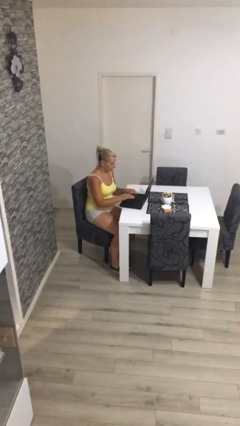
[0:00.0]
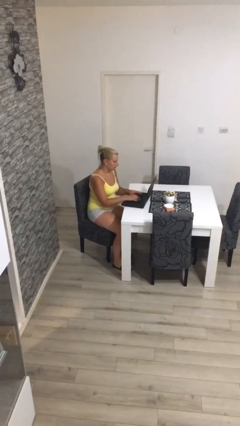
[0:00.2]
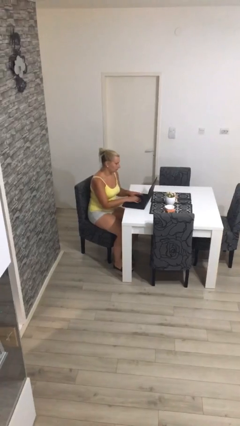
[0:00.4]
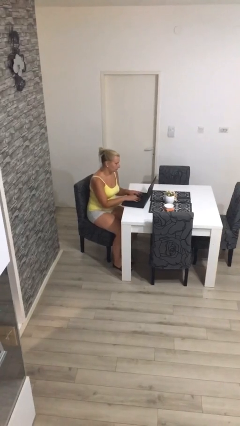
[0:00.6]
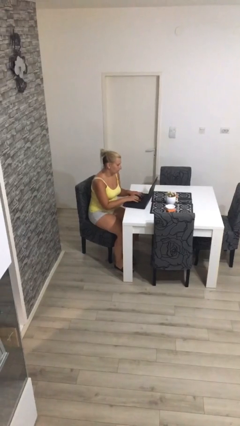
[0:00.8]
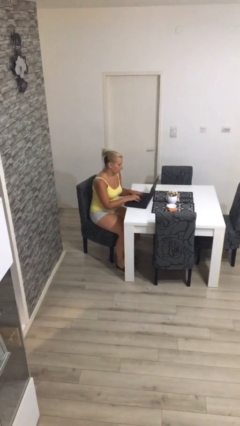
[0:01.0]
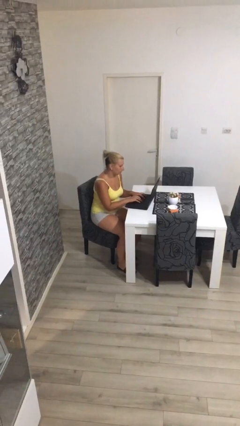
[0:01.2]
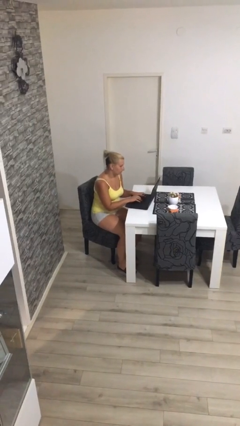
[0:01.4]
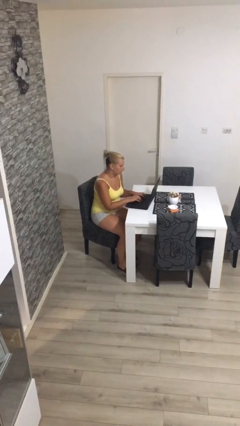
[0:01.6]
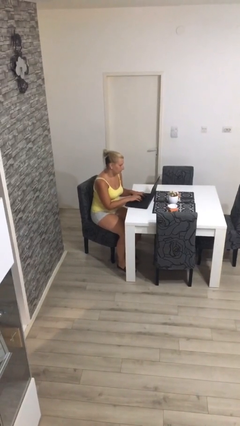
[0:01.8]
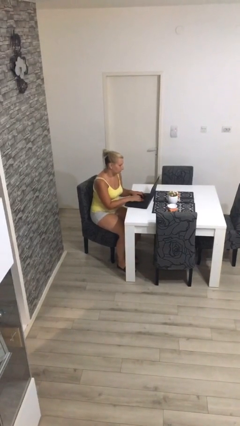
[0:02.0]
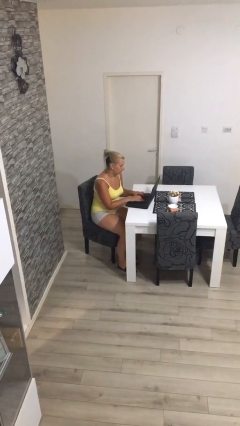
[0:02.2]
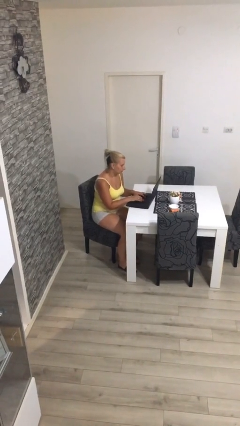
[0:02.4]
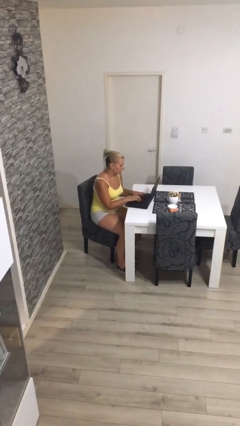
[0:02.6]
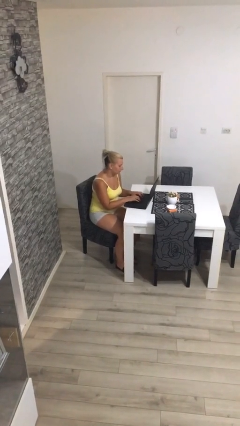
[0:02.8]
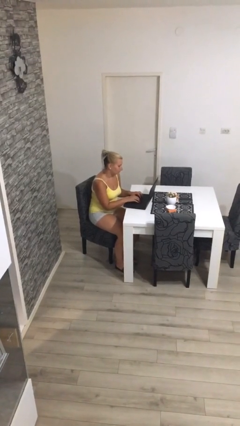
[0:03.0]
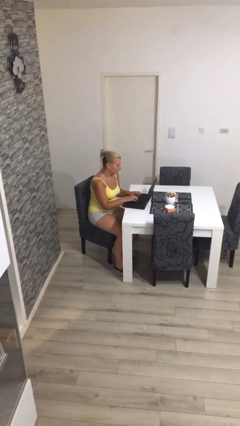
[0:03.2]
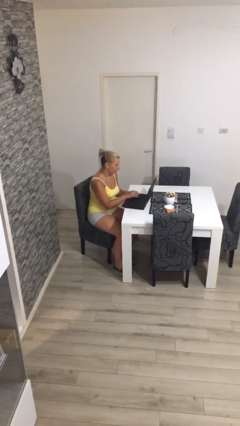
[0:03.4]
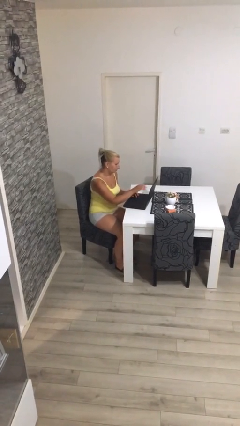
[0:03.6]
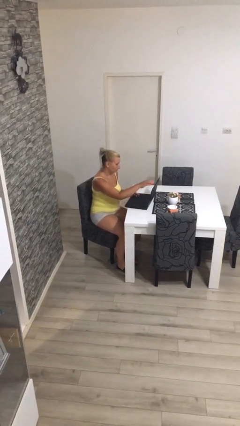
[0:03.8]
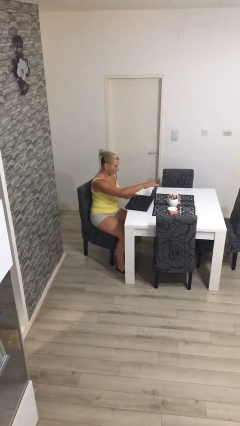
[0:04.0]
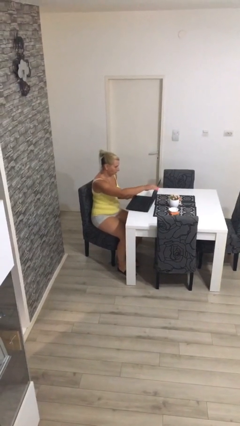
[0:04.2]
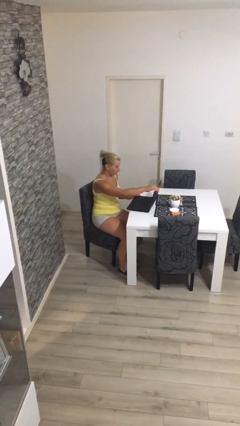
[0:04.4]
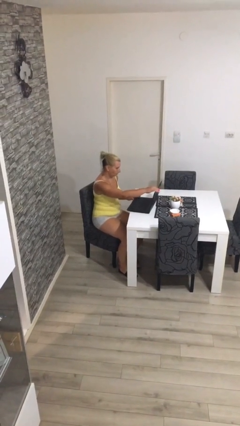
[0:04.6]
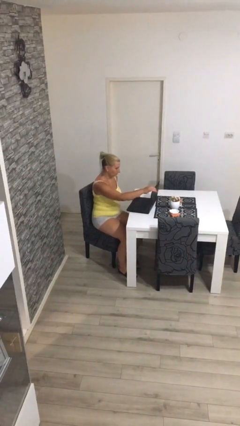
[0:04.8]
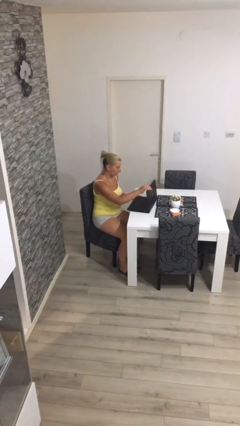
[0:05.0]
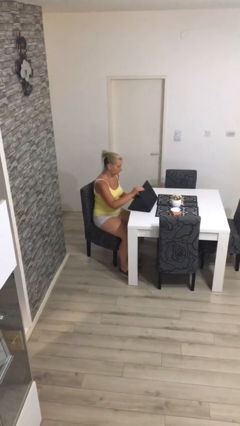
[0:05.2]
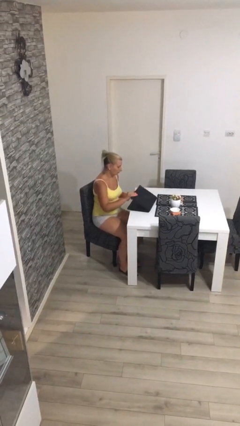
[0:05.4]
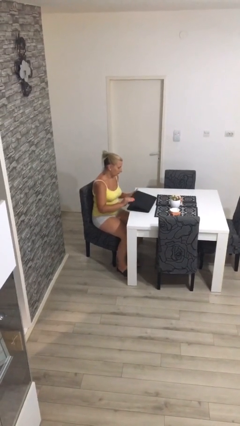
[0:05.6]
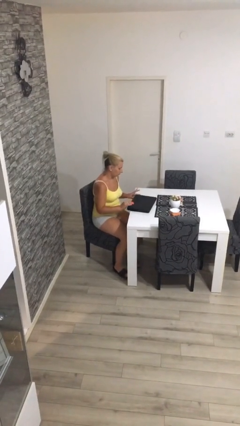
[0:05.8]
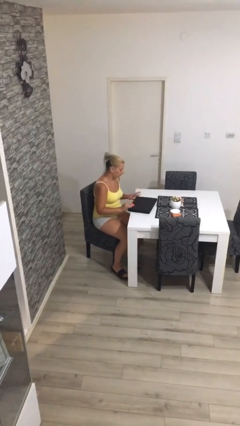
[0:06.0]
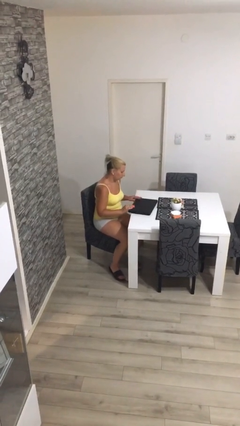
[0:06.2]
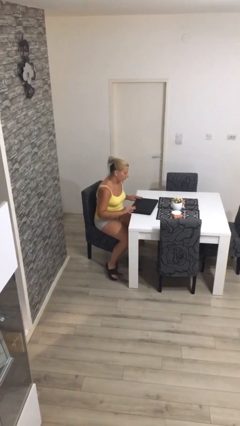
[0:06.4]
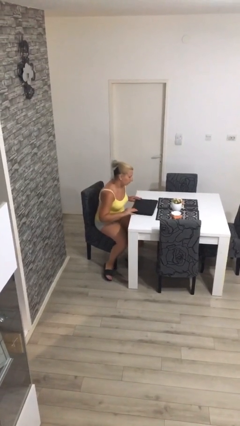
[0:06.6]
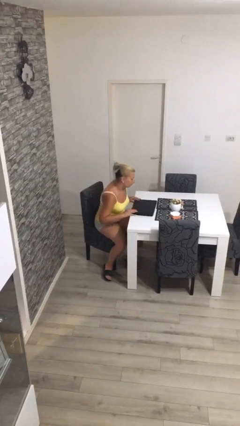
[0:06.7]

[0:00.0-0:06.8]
person interacts with laptop

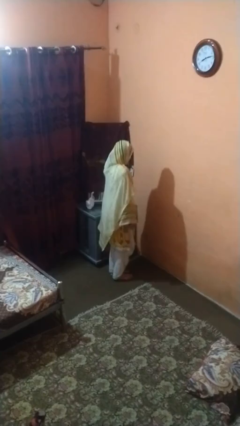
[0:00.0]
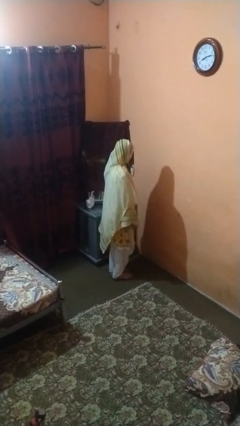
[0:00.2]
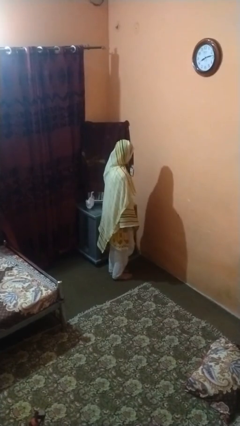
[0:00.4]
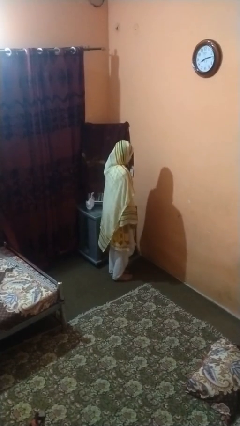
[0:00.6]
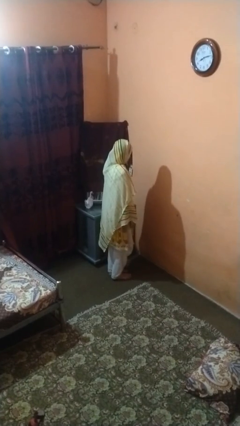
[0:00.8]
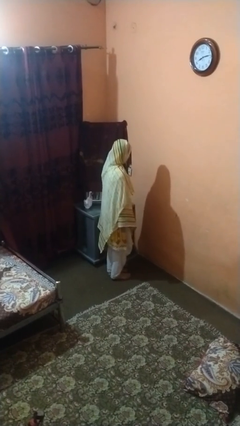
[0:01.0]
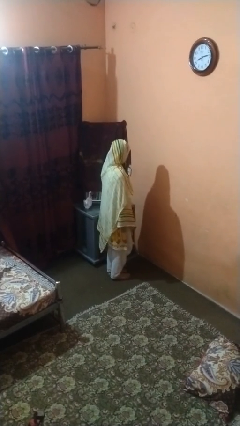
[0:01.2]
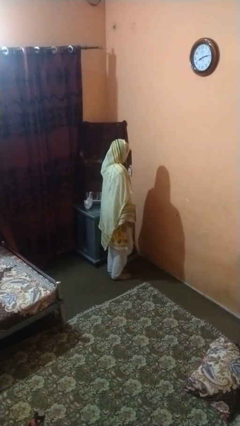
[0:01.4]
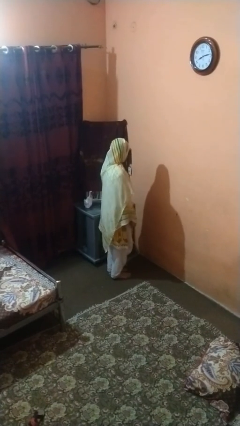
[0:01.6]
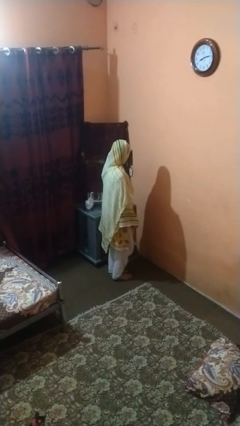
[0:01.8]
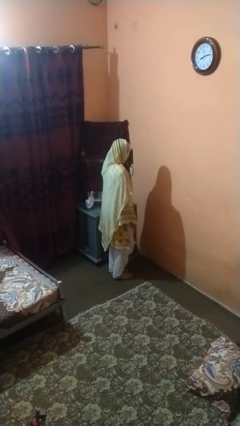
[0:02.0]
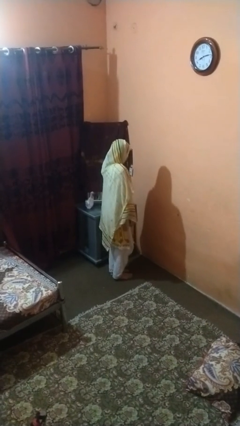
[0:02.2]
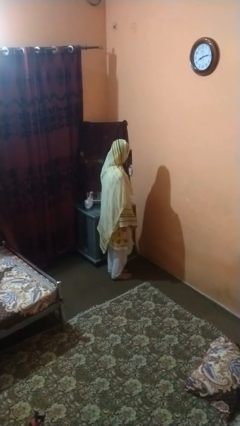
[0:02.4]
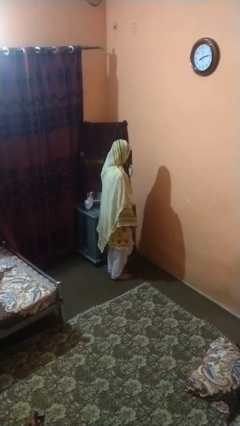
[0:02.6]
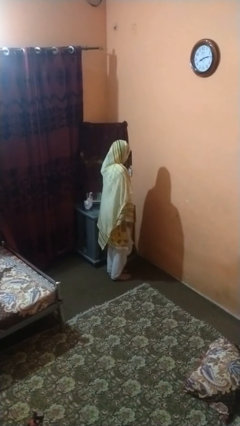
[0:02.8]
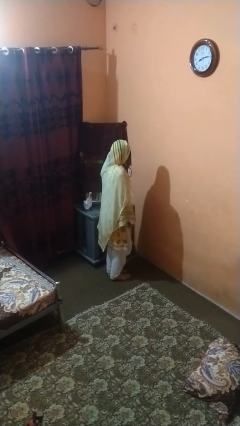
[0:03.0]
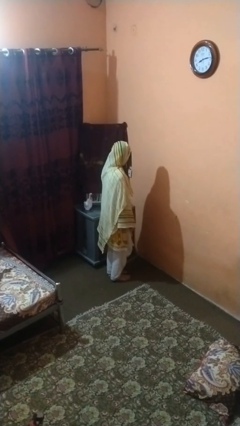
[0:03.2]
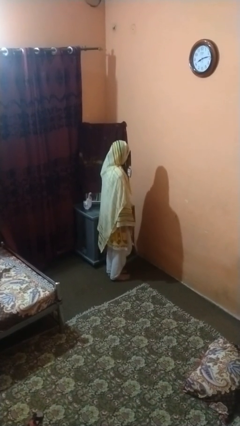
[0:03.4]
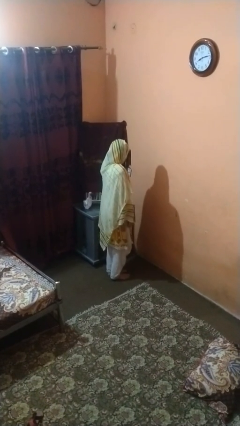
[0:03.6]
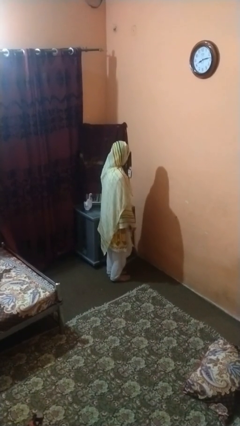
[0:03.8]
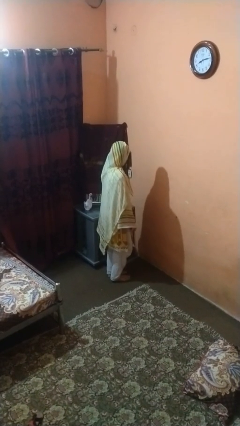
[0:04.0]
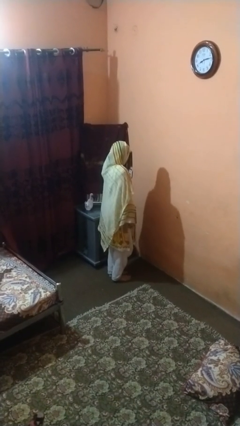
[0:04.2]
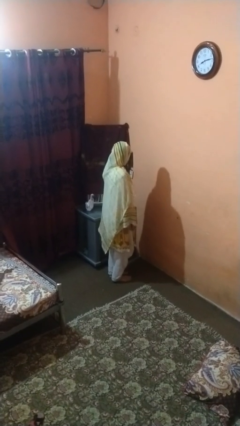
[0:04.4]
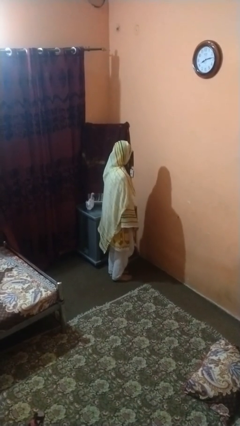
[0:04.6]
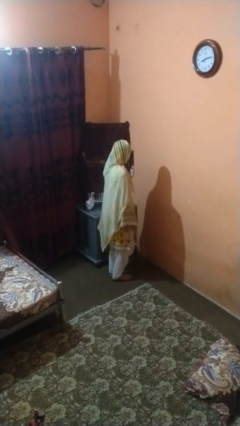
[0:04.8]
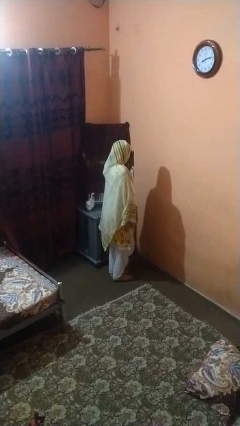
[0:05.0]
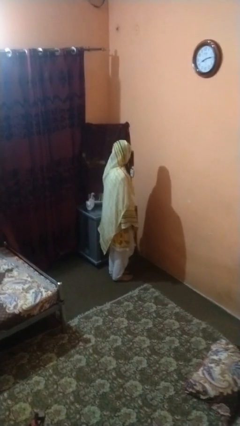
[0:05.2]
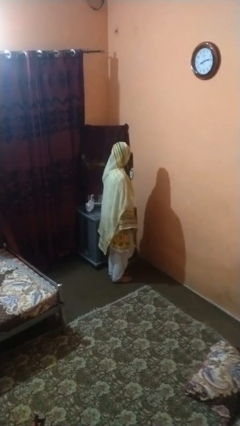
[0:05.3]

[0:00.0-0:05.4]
person shrugs

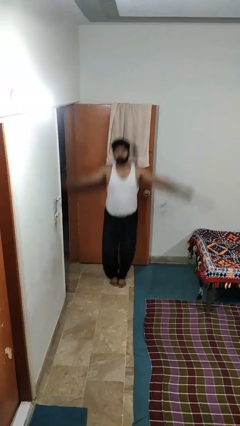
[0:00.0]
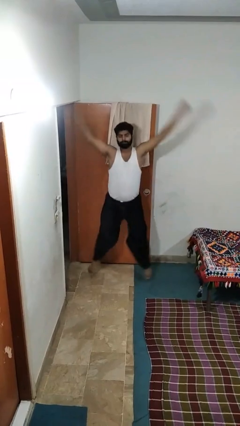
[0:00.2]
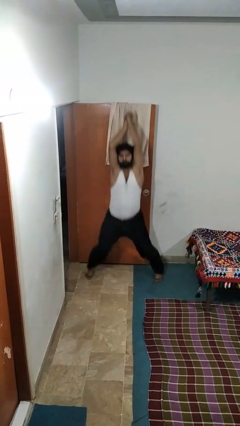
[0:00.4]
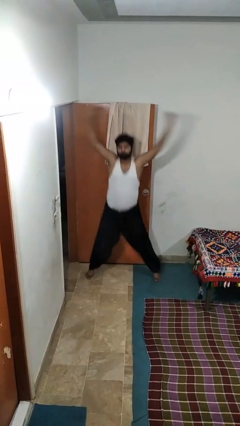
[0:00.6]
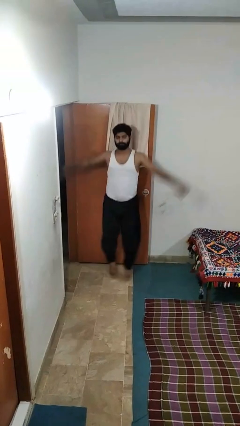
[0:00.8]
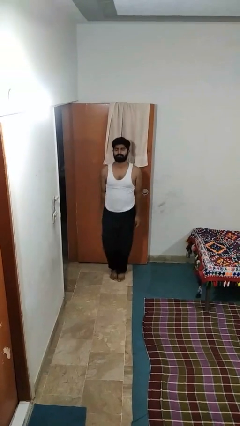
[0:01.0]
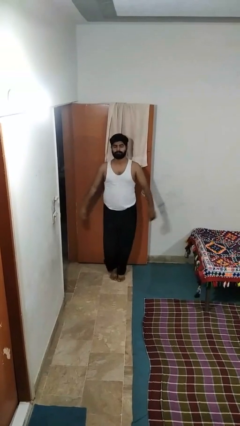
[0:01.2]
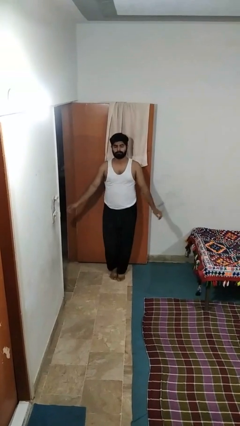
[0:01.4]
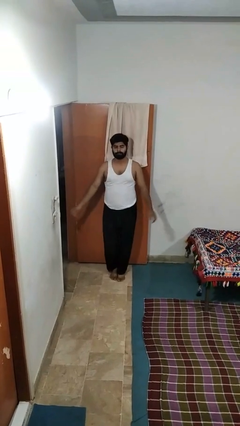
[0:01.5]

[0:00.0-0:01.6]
person exercises with jumping jacks

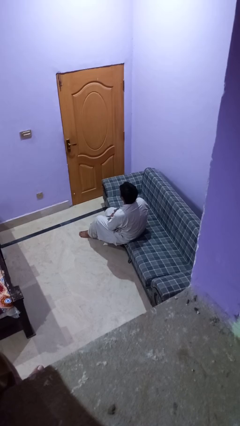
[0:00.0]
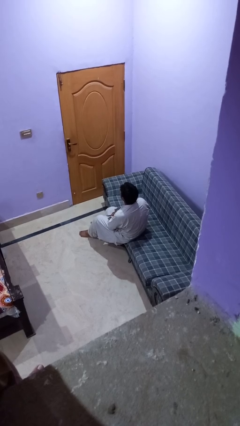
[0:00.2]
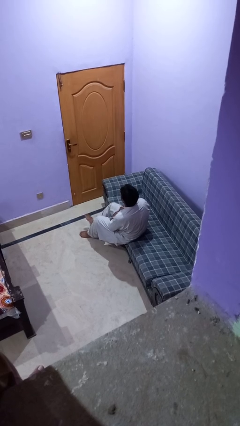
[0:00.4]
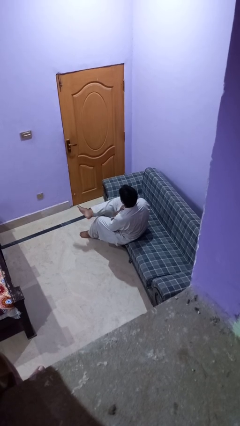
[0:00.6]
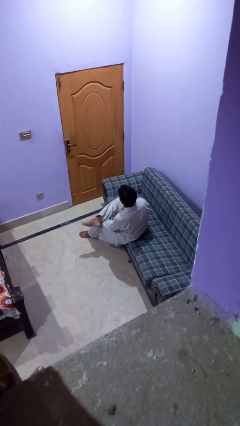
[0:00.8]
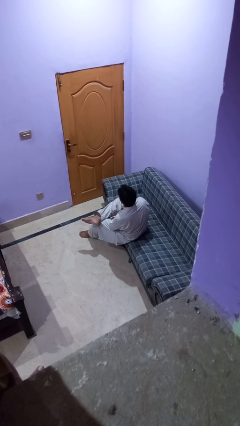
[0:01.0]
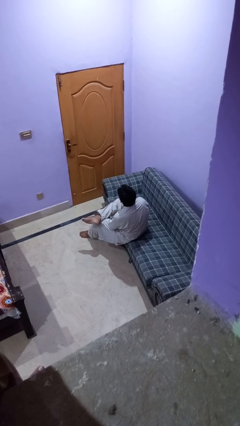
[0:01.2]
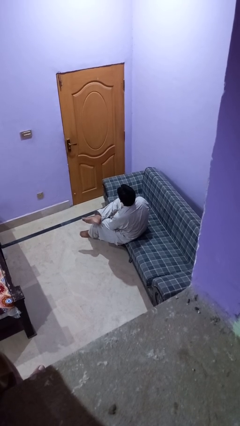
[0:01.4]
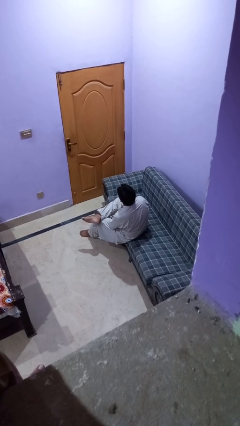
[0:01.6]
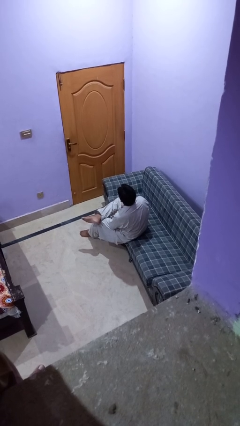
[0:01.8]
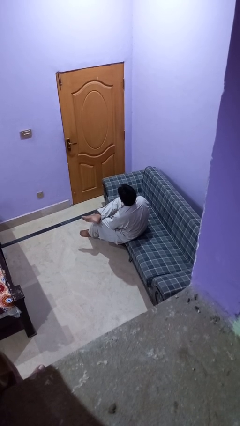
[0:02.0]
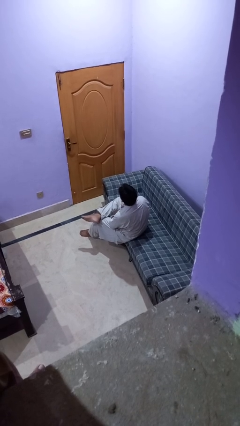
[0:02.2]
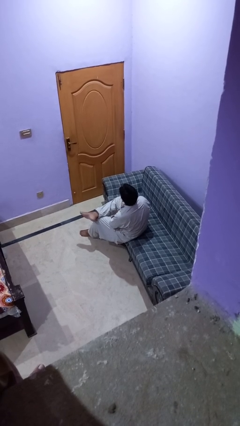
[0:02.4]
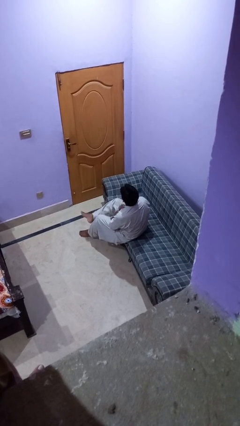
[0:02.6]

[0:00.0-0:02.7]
person crosses legs

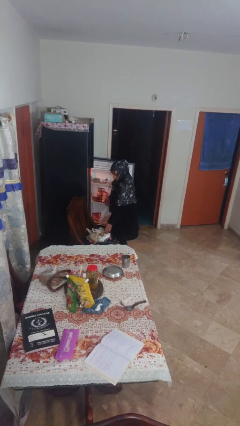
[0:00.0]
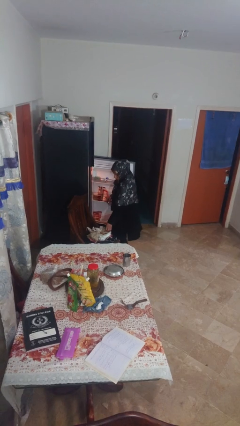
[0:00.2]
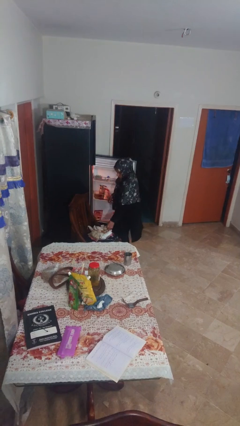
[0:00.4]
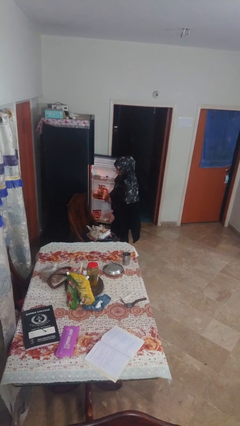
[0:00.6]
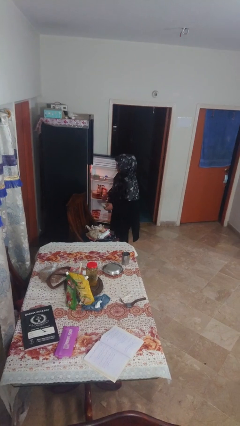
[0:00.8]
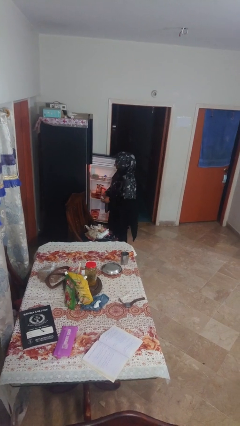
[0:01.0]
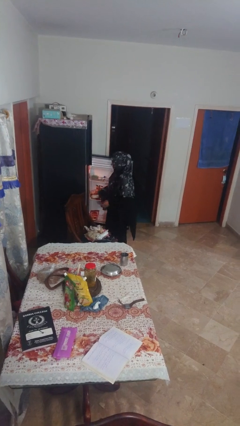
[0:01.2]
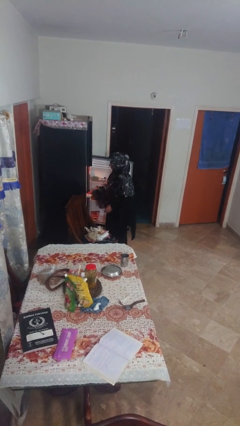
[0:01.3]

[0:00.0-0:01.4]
person loads groceries into refrigerator
